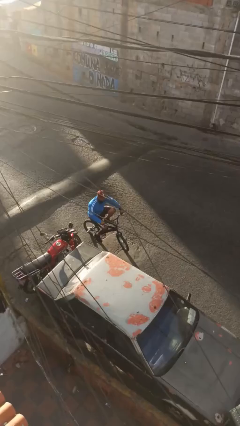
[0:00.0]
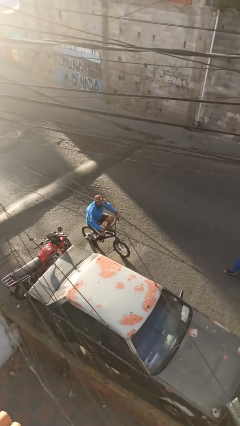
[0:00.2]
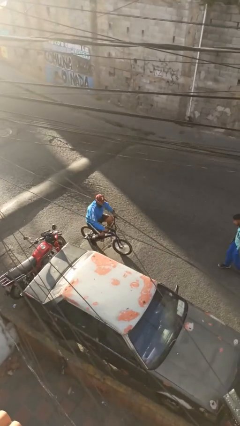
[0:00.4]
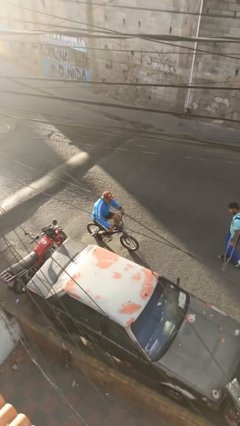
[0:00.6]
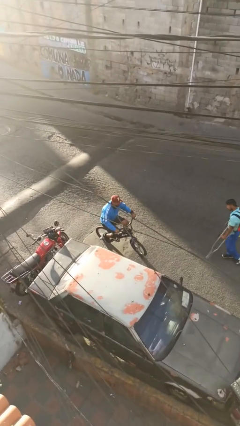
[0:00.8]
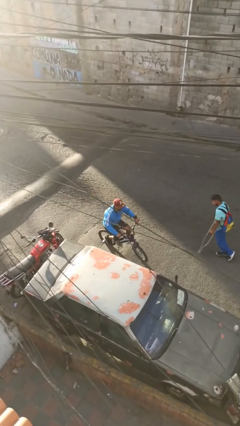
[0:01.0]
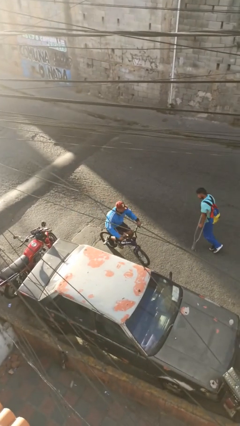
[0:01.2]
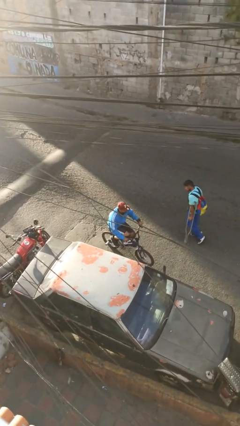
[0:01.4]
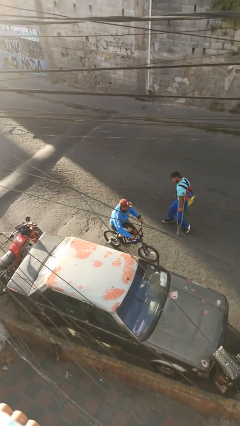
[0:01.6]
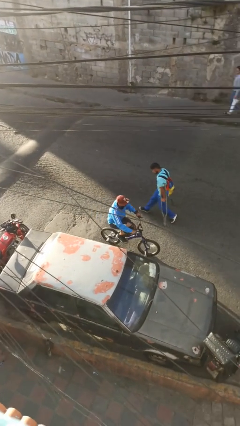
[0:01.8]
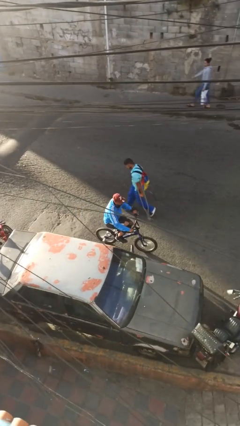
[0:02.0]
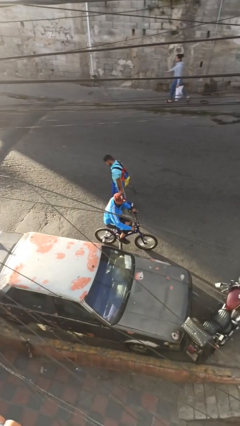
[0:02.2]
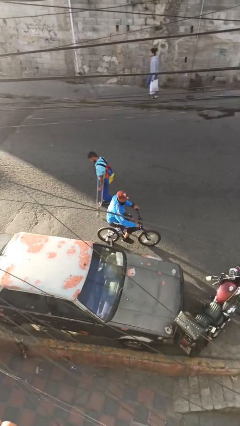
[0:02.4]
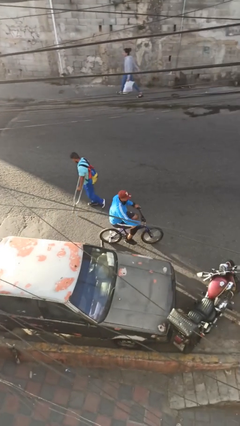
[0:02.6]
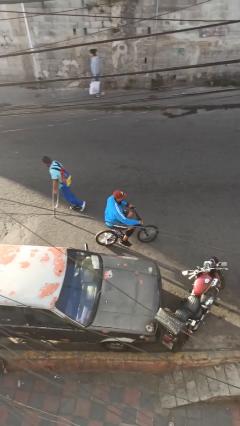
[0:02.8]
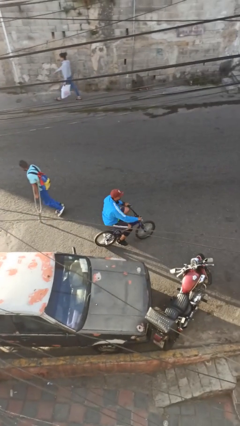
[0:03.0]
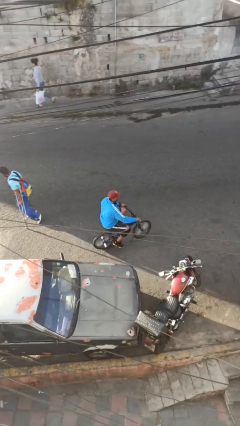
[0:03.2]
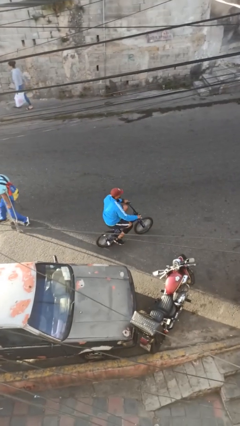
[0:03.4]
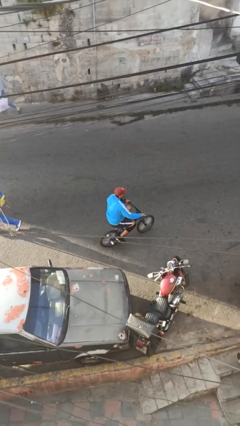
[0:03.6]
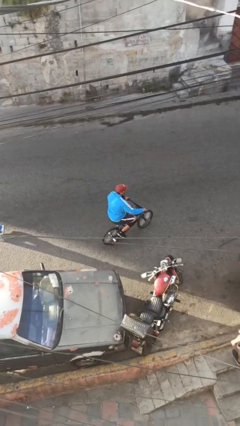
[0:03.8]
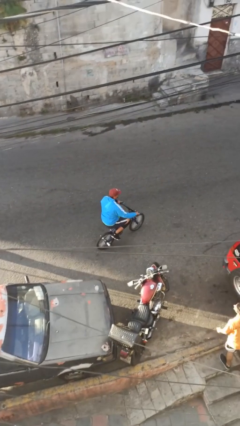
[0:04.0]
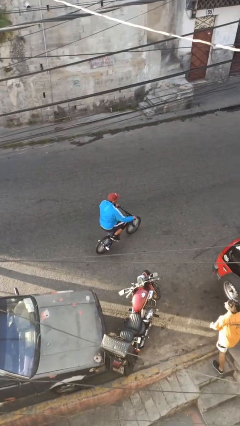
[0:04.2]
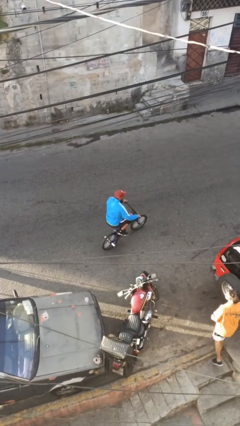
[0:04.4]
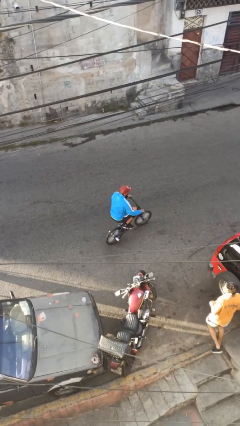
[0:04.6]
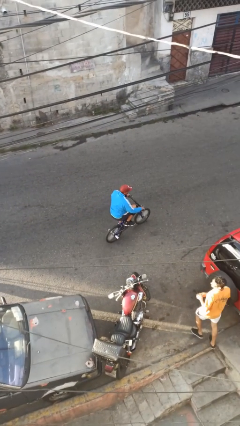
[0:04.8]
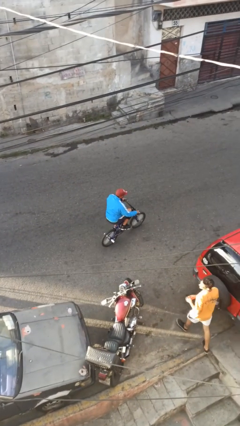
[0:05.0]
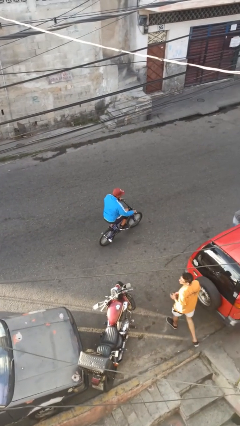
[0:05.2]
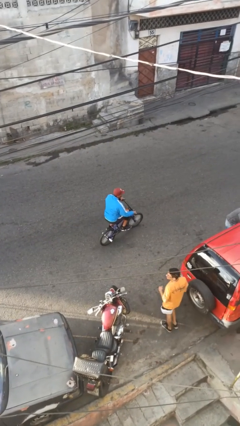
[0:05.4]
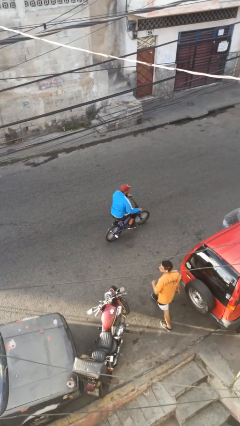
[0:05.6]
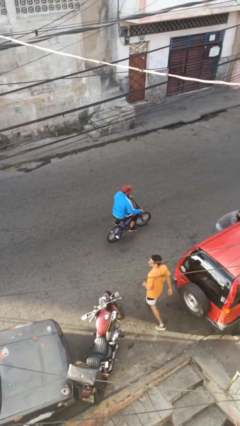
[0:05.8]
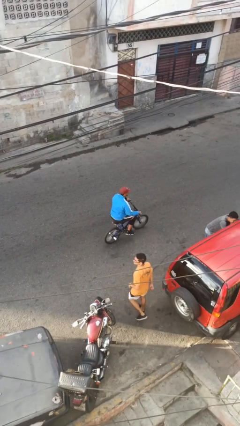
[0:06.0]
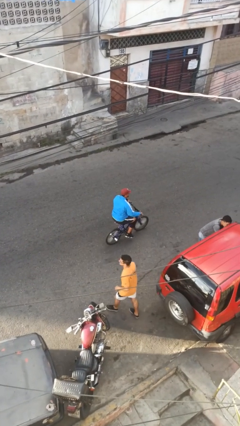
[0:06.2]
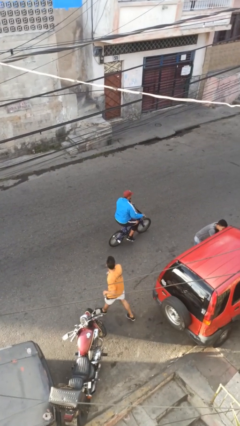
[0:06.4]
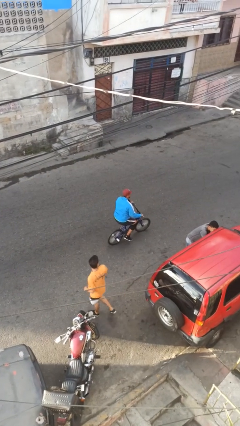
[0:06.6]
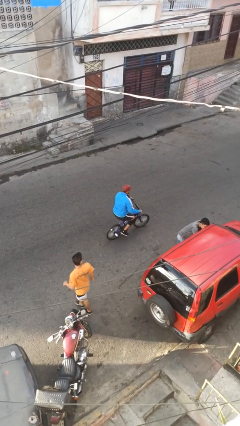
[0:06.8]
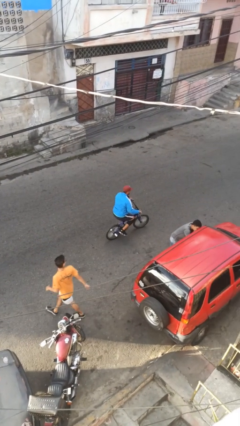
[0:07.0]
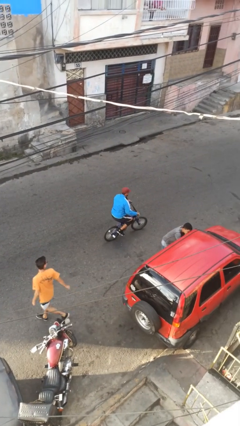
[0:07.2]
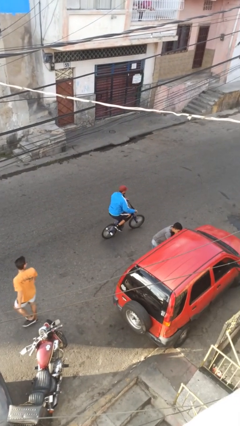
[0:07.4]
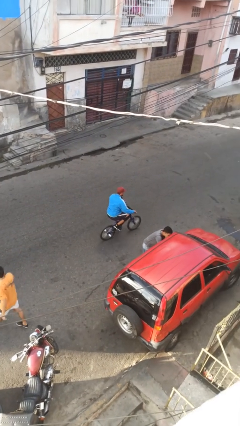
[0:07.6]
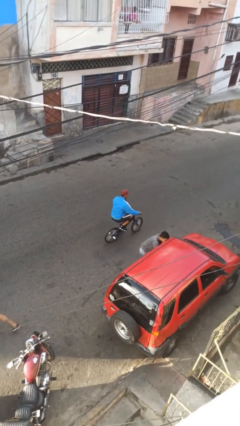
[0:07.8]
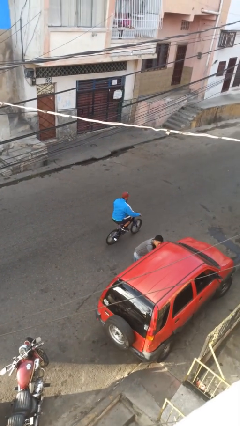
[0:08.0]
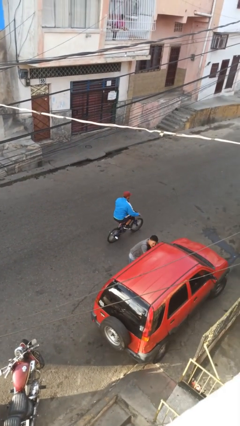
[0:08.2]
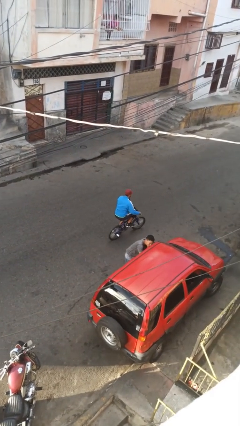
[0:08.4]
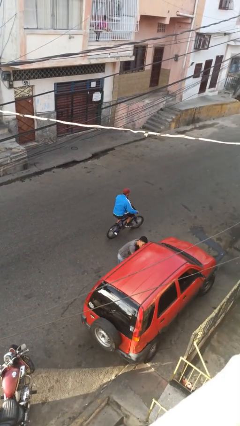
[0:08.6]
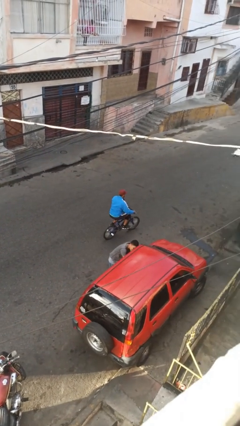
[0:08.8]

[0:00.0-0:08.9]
person rides bicycle

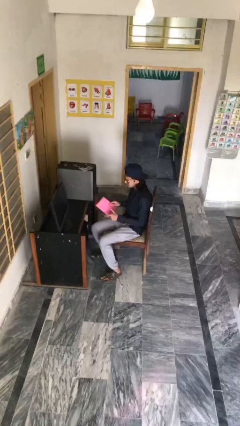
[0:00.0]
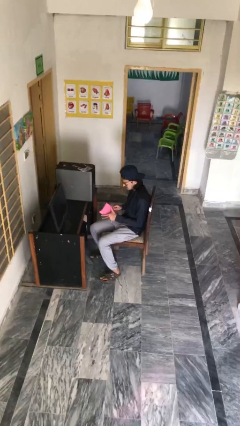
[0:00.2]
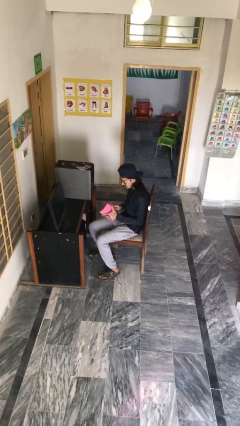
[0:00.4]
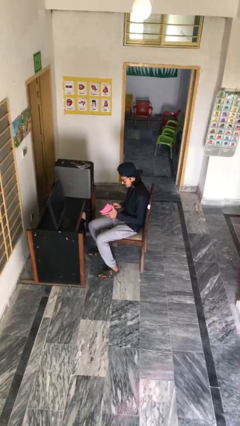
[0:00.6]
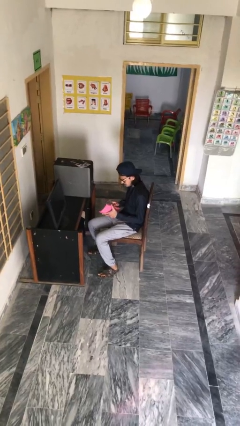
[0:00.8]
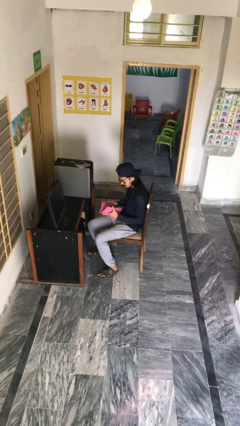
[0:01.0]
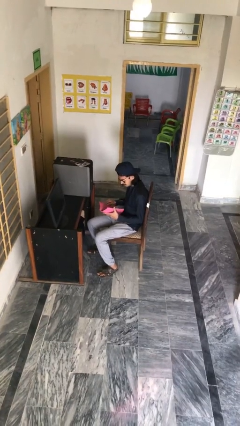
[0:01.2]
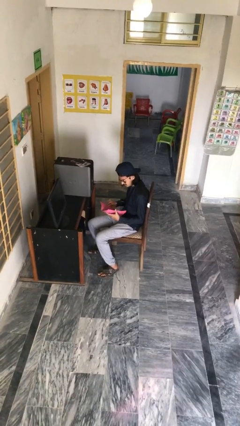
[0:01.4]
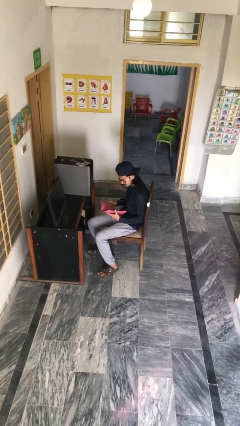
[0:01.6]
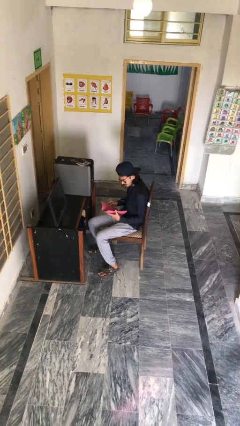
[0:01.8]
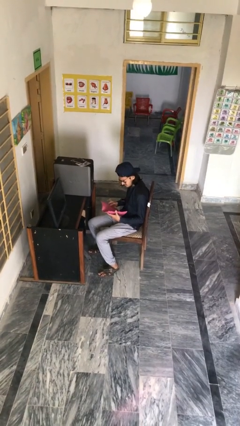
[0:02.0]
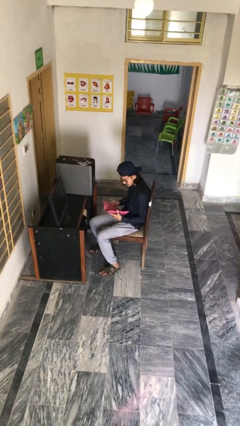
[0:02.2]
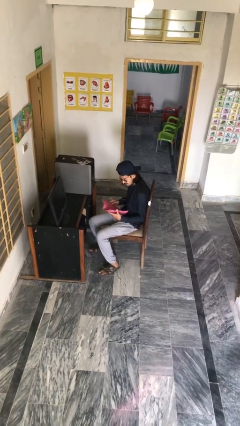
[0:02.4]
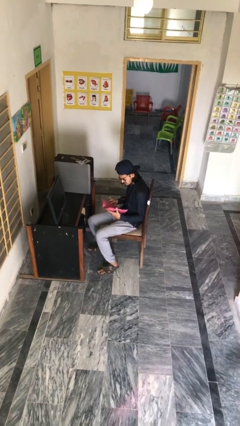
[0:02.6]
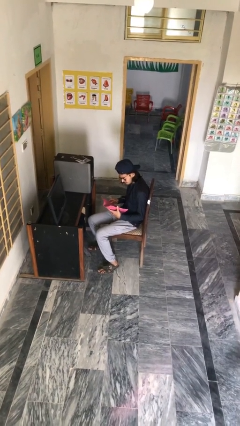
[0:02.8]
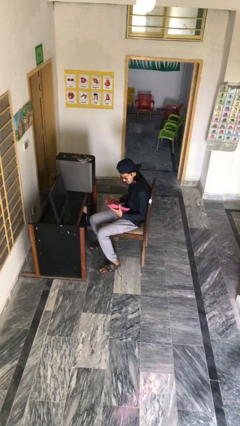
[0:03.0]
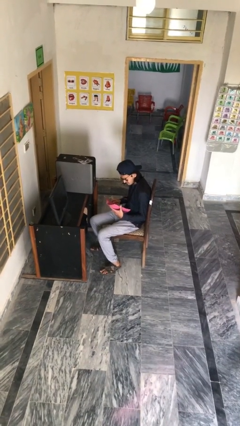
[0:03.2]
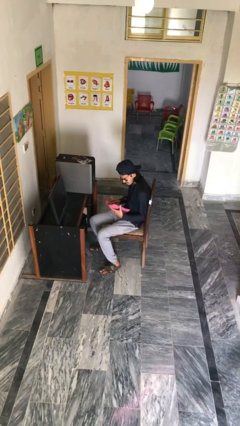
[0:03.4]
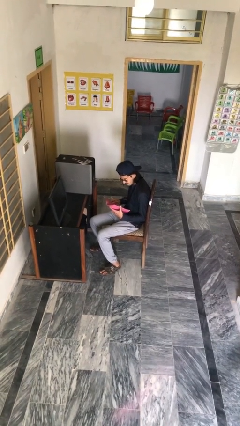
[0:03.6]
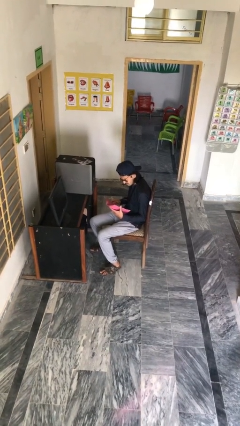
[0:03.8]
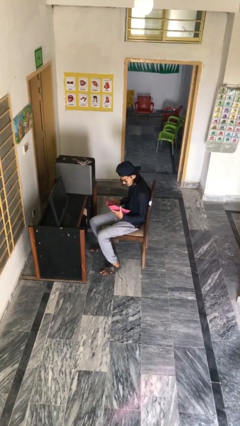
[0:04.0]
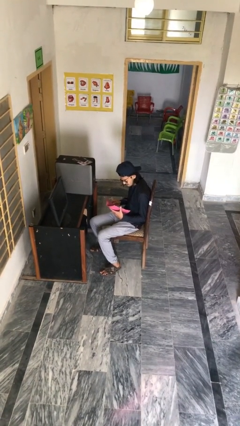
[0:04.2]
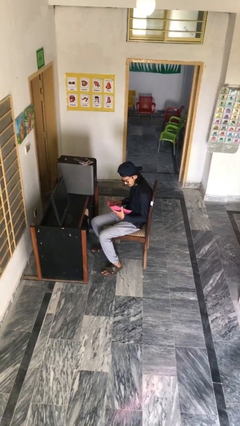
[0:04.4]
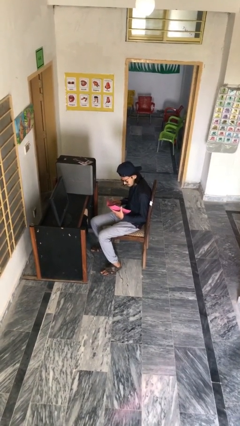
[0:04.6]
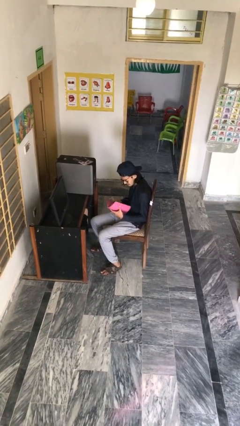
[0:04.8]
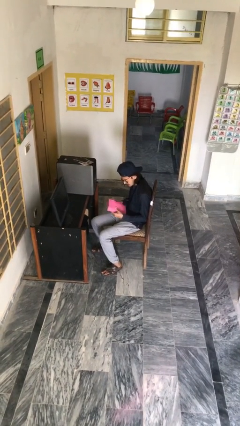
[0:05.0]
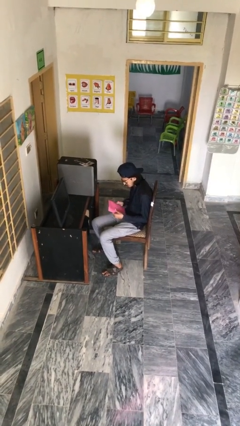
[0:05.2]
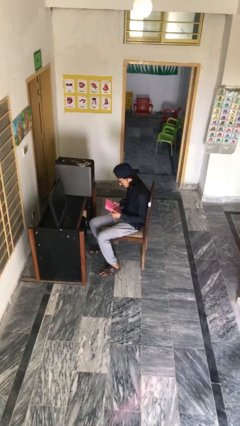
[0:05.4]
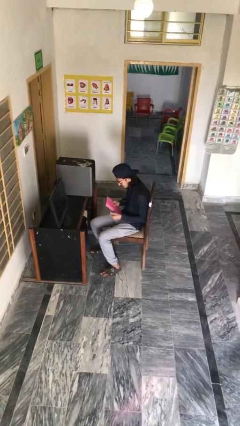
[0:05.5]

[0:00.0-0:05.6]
person reads document

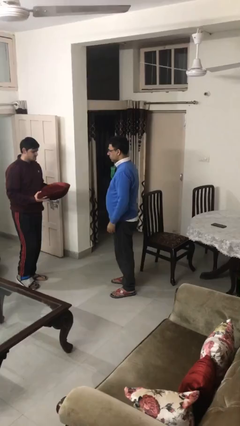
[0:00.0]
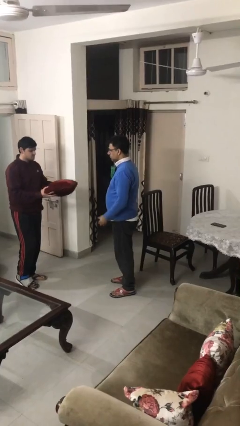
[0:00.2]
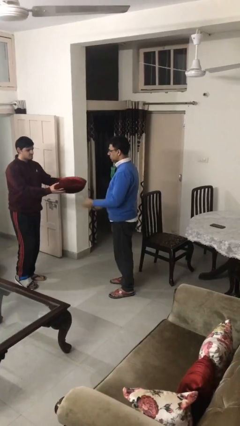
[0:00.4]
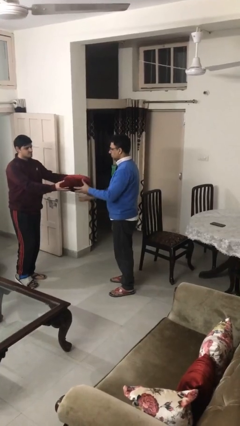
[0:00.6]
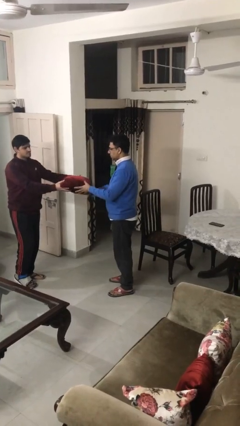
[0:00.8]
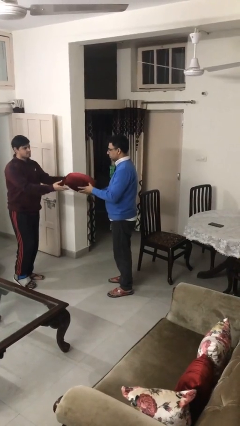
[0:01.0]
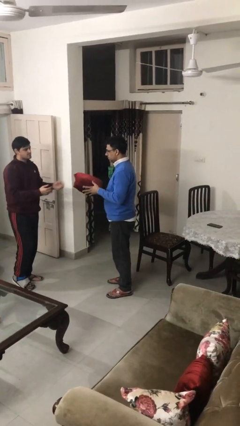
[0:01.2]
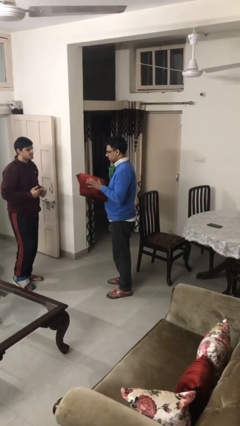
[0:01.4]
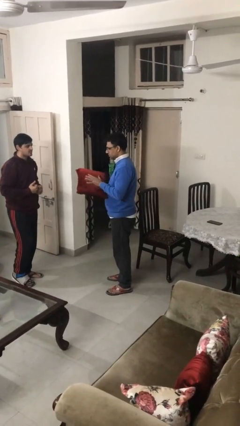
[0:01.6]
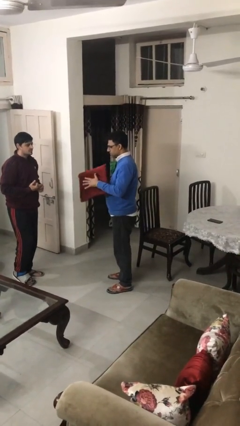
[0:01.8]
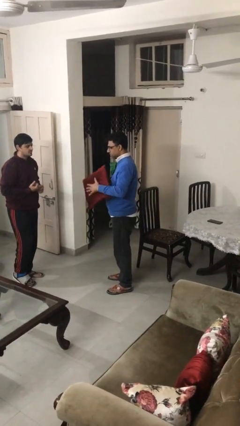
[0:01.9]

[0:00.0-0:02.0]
person transfers object to person

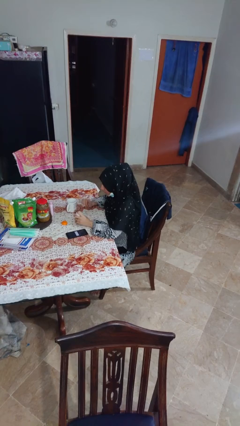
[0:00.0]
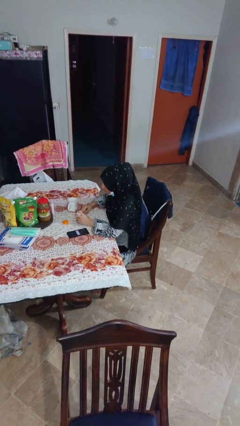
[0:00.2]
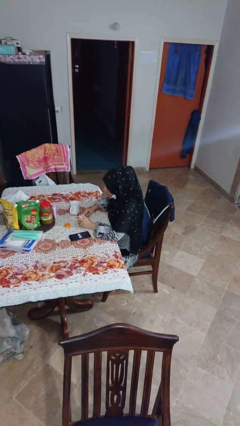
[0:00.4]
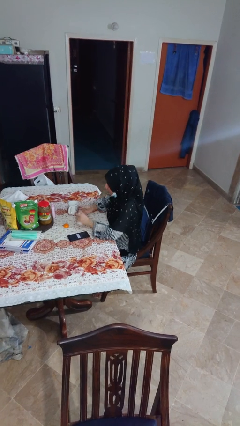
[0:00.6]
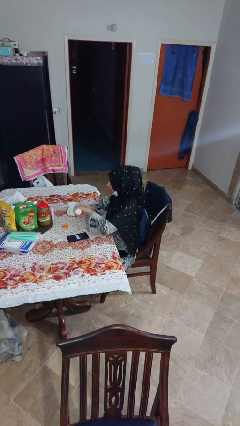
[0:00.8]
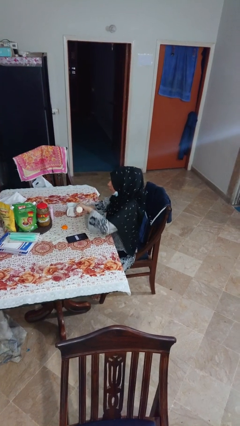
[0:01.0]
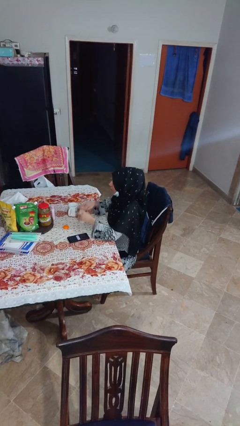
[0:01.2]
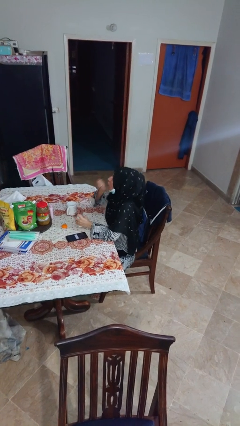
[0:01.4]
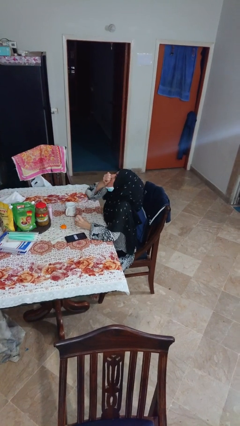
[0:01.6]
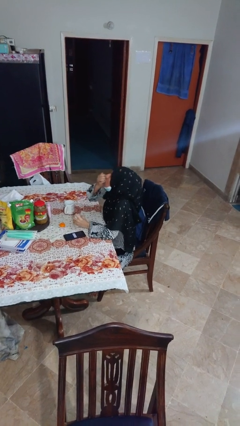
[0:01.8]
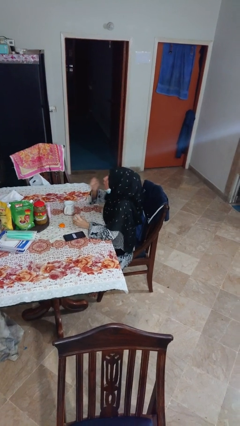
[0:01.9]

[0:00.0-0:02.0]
person takes medicine pills
